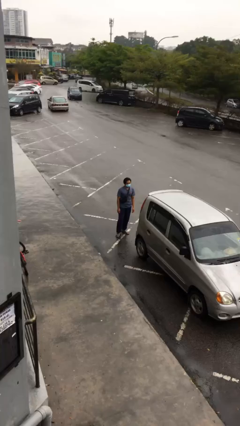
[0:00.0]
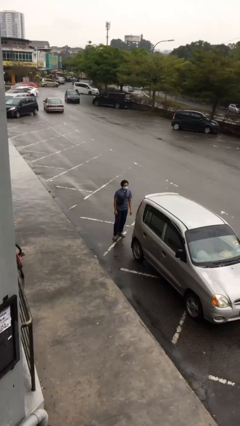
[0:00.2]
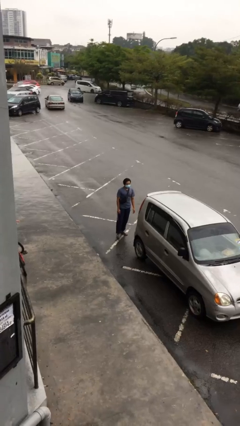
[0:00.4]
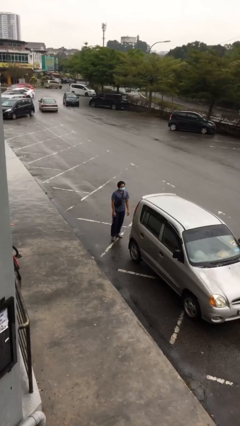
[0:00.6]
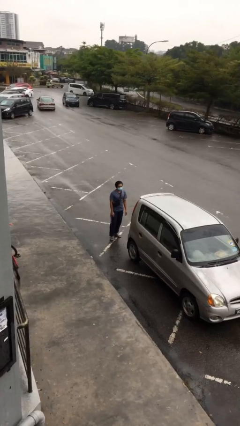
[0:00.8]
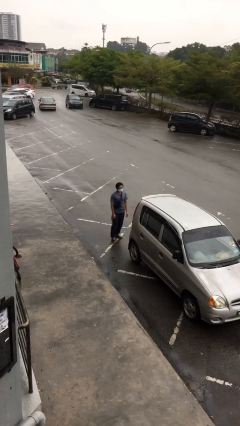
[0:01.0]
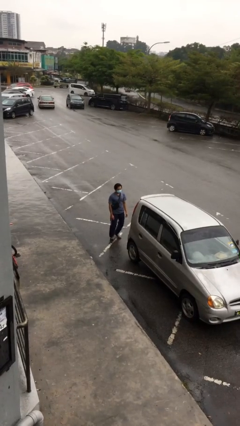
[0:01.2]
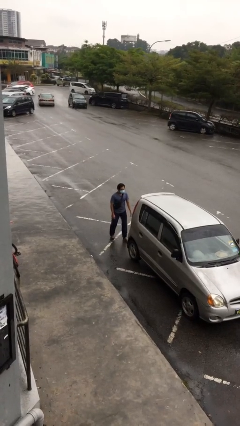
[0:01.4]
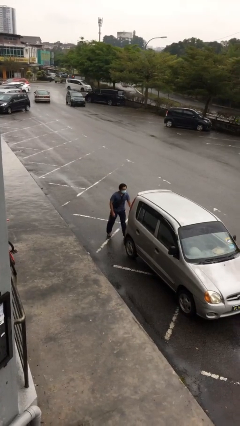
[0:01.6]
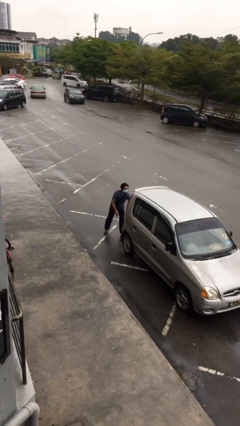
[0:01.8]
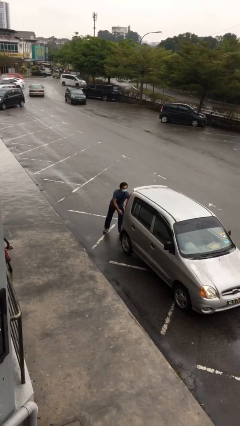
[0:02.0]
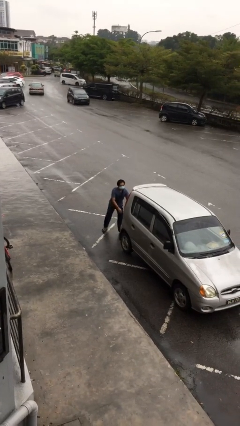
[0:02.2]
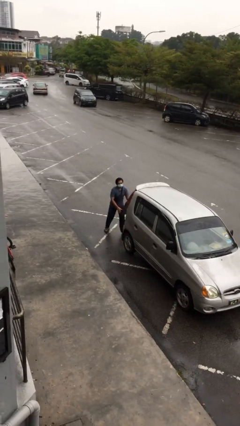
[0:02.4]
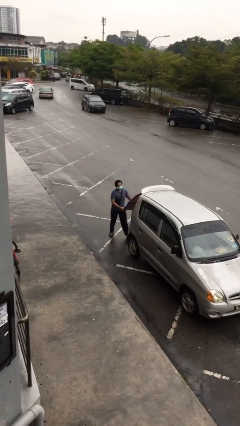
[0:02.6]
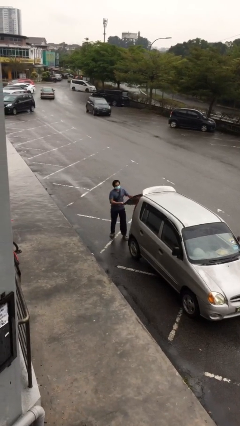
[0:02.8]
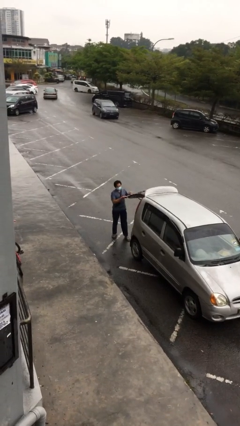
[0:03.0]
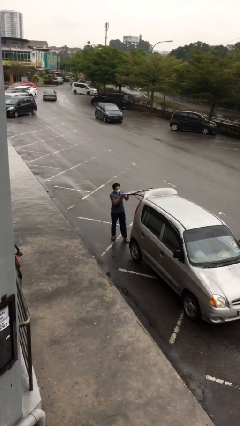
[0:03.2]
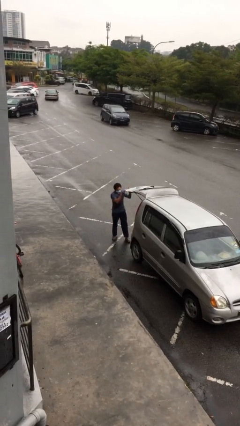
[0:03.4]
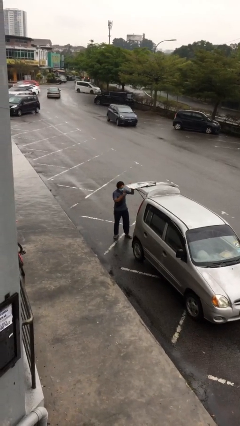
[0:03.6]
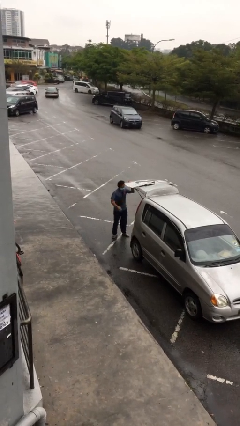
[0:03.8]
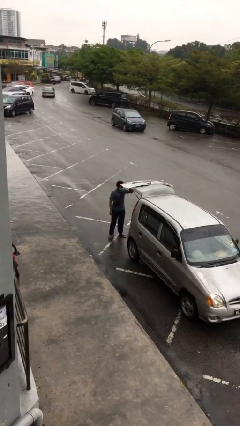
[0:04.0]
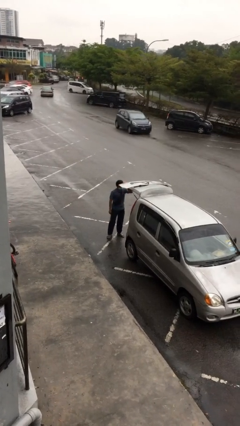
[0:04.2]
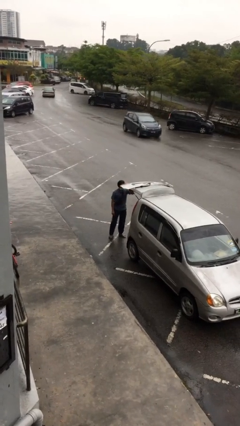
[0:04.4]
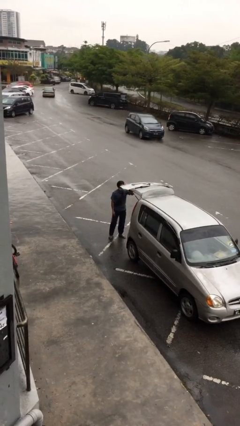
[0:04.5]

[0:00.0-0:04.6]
person opens car trunk

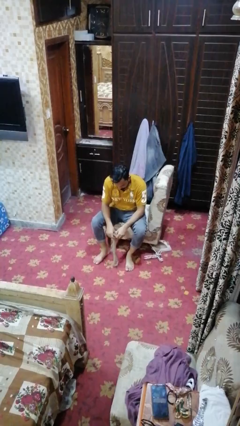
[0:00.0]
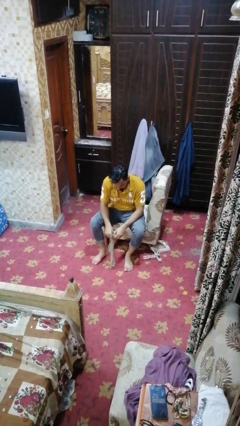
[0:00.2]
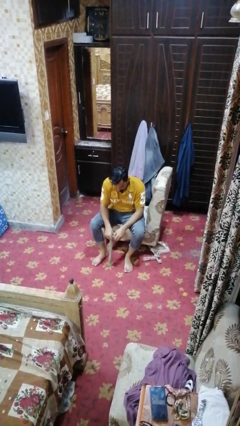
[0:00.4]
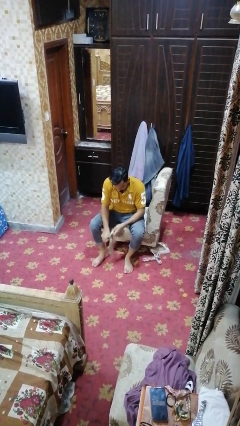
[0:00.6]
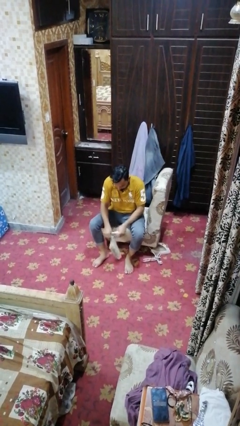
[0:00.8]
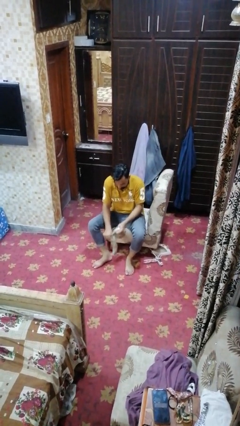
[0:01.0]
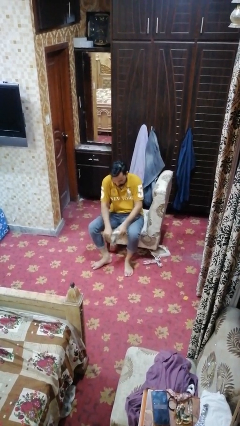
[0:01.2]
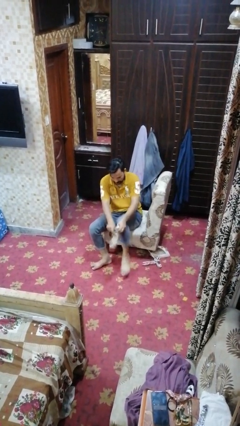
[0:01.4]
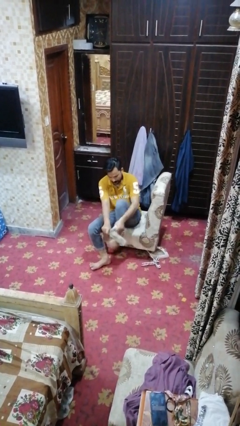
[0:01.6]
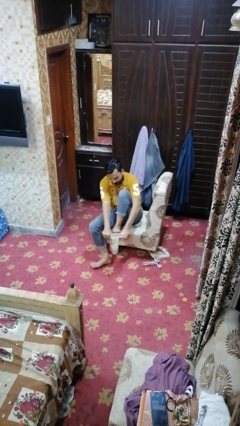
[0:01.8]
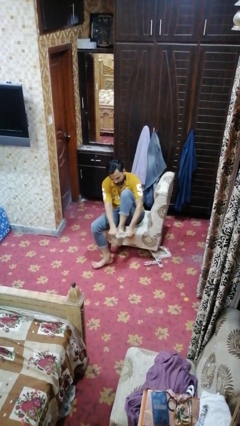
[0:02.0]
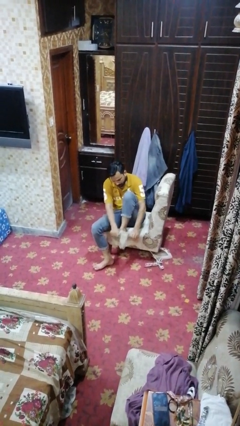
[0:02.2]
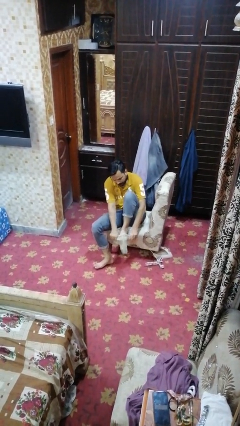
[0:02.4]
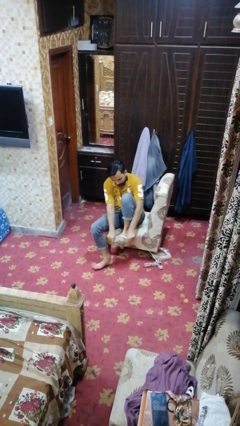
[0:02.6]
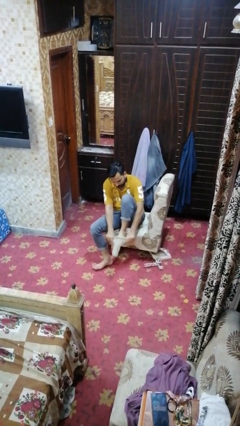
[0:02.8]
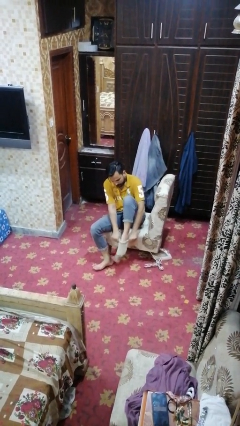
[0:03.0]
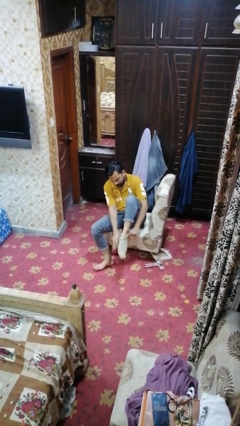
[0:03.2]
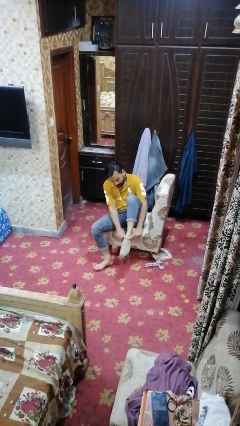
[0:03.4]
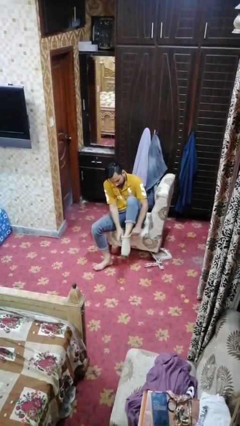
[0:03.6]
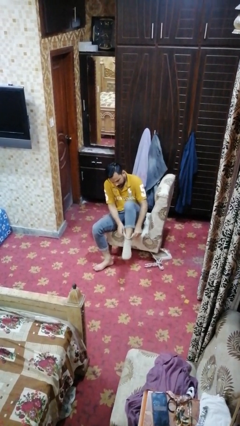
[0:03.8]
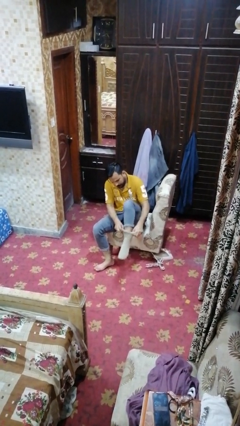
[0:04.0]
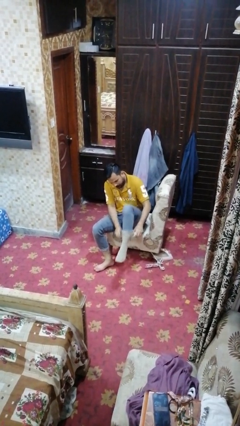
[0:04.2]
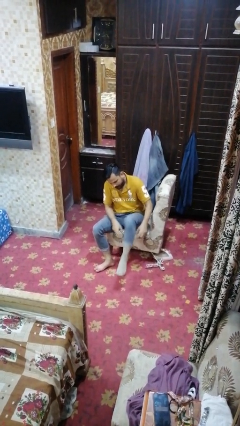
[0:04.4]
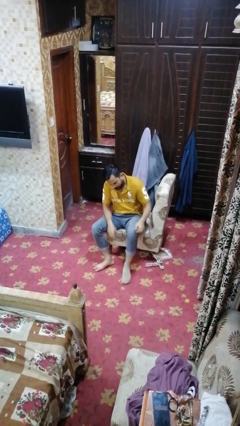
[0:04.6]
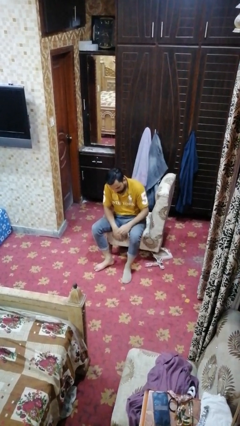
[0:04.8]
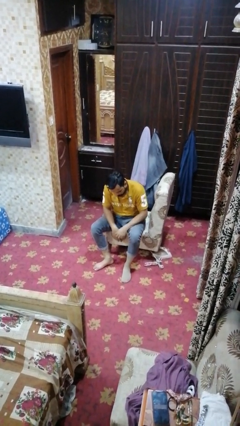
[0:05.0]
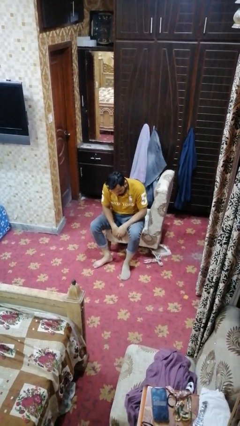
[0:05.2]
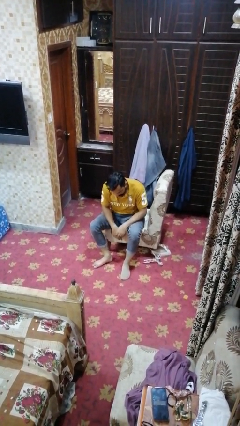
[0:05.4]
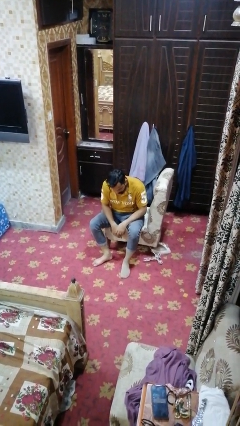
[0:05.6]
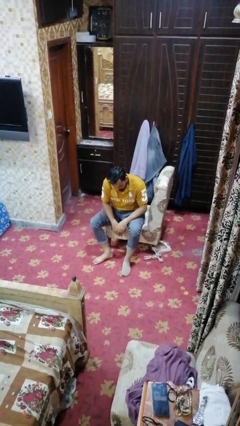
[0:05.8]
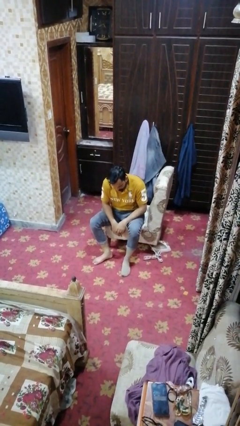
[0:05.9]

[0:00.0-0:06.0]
person puts on socks

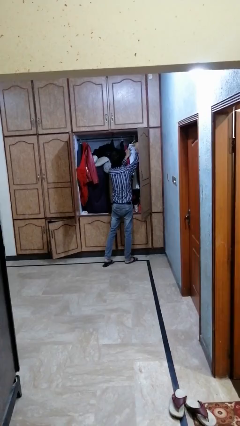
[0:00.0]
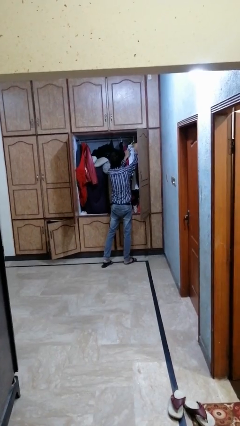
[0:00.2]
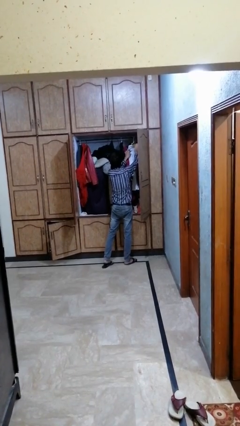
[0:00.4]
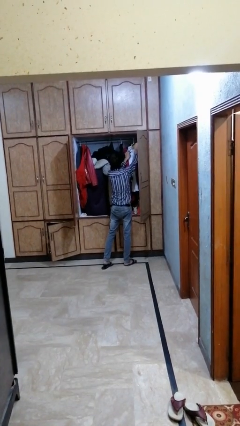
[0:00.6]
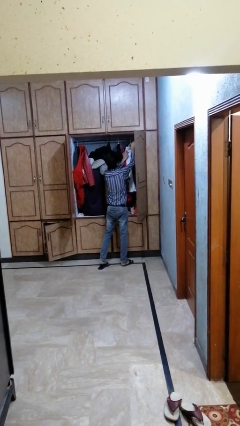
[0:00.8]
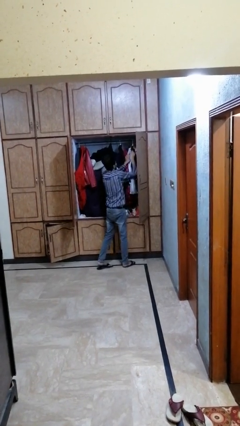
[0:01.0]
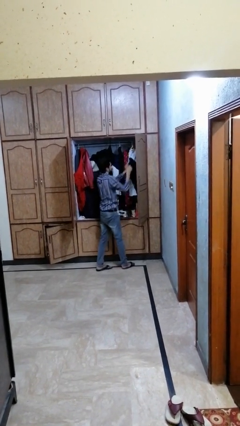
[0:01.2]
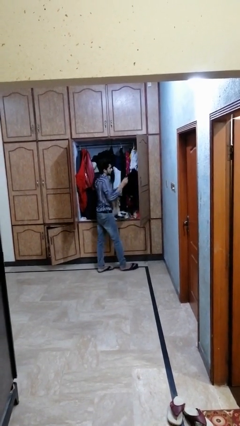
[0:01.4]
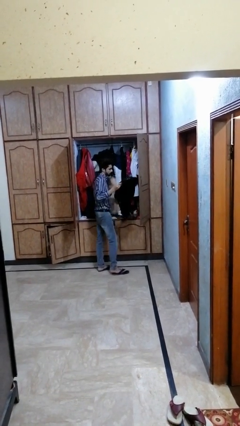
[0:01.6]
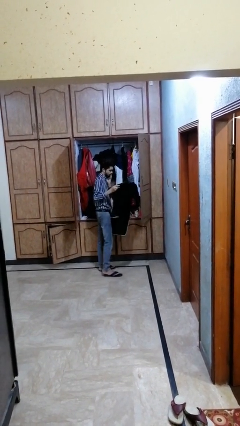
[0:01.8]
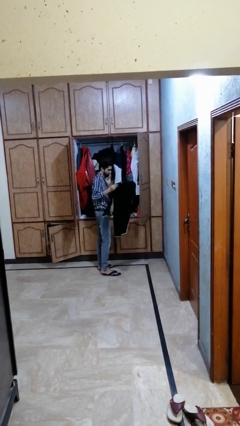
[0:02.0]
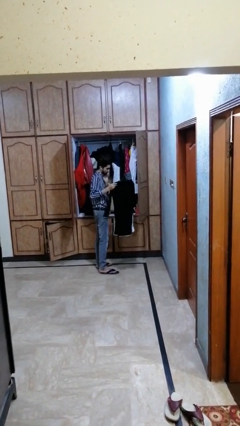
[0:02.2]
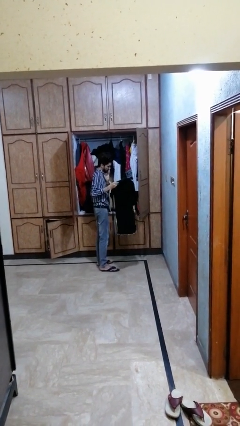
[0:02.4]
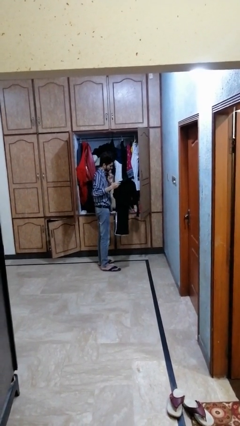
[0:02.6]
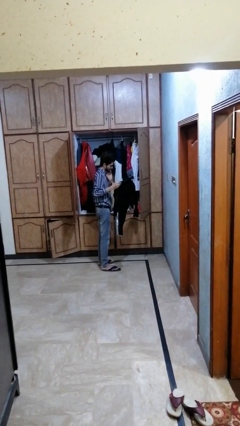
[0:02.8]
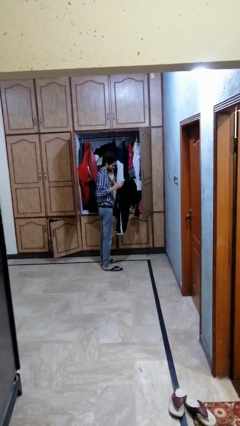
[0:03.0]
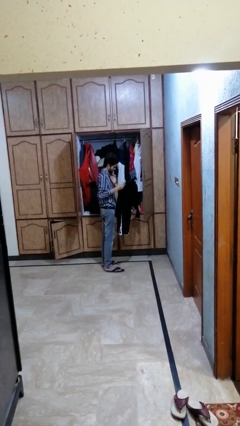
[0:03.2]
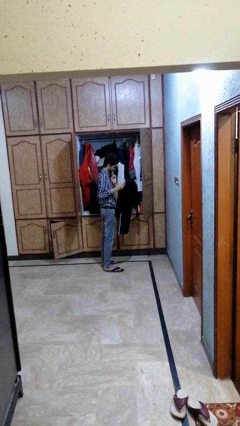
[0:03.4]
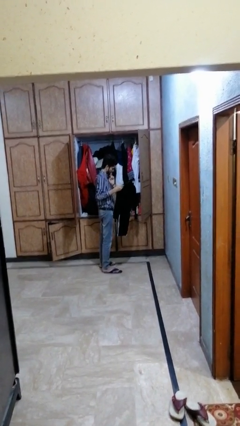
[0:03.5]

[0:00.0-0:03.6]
person takes clothes from dresser

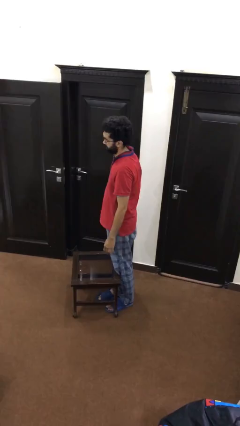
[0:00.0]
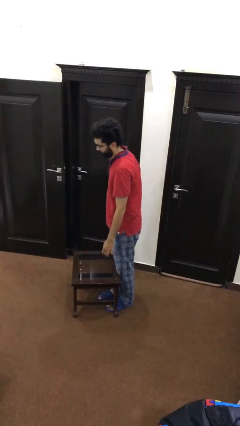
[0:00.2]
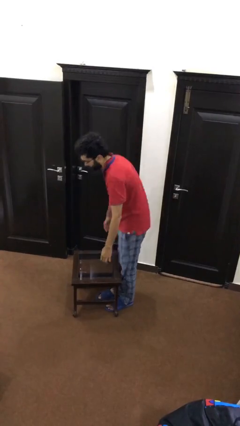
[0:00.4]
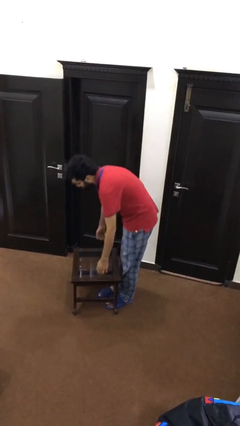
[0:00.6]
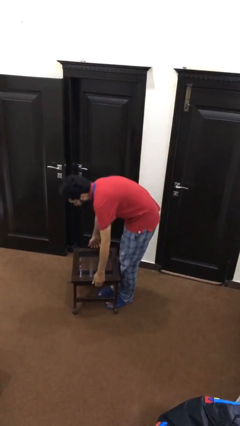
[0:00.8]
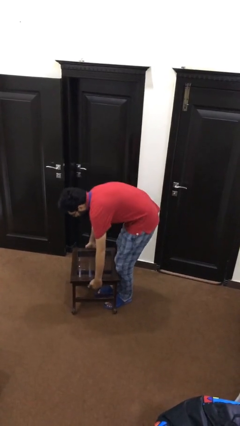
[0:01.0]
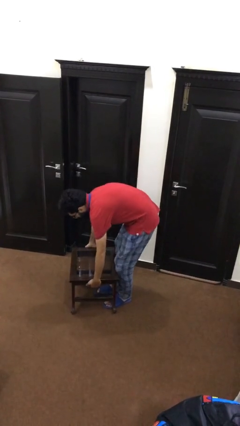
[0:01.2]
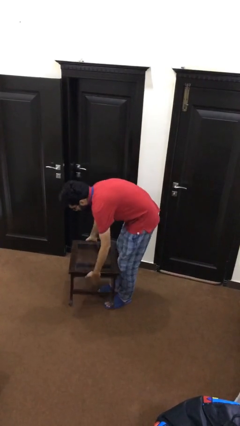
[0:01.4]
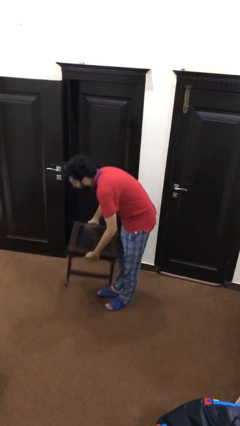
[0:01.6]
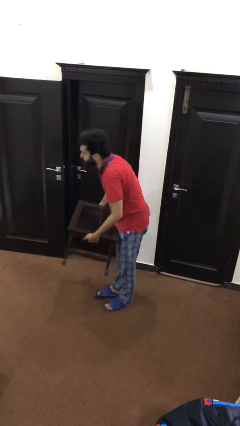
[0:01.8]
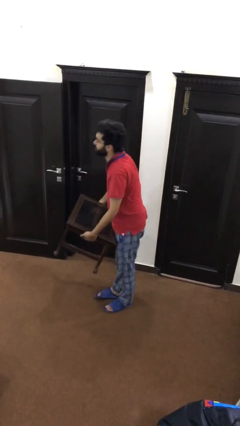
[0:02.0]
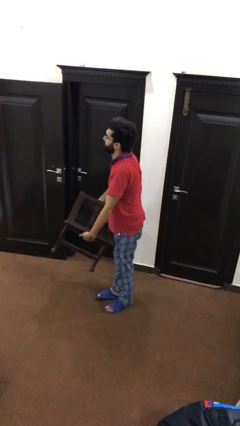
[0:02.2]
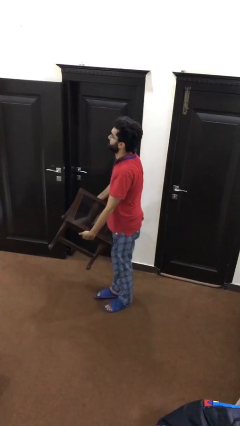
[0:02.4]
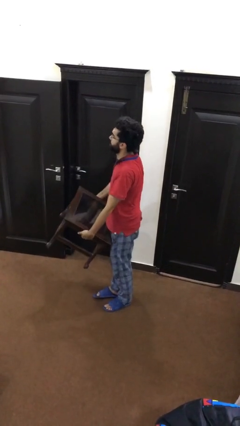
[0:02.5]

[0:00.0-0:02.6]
person picks up object from floor

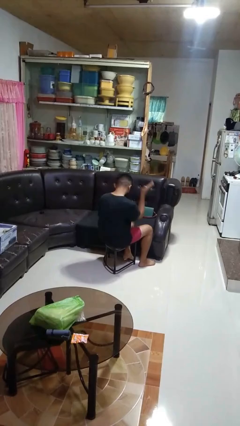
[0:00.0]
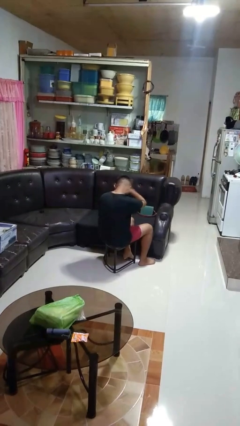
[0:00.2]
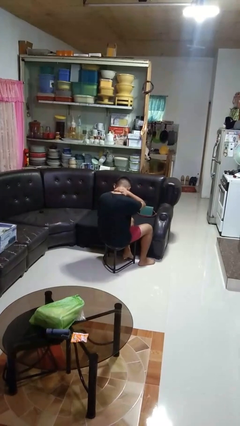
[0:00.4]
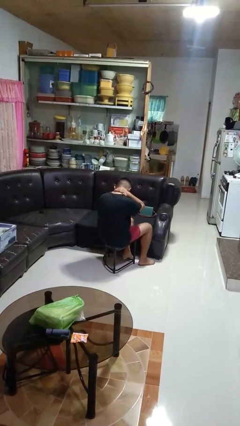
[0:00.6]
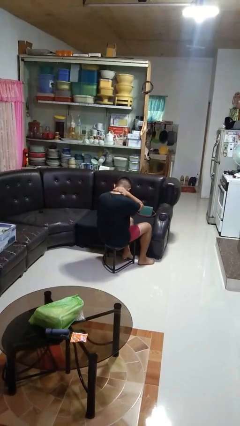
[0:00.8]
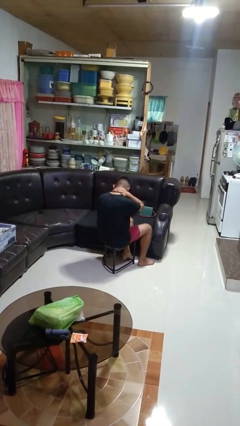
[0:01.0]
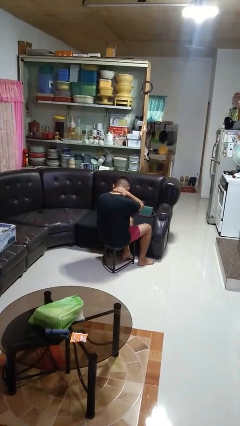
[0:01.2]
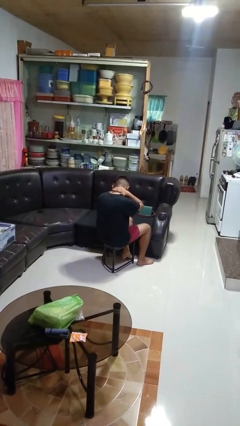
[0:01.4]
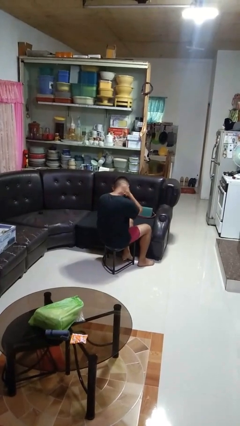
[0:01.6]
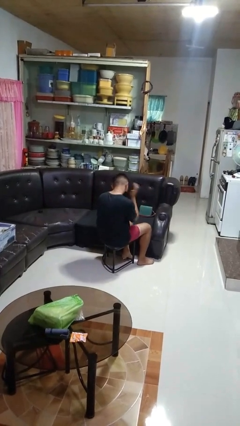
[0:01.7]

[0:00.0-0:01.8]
person swats bug
